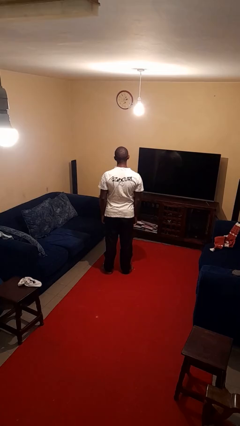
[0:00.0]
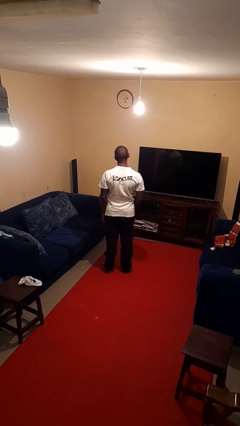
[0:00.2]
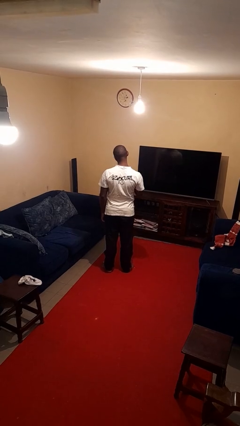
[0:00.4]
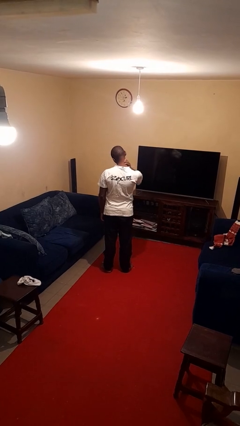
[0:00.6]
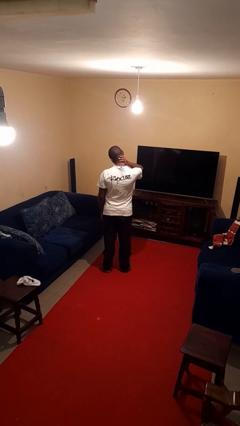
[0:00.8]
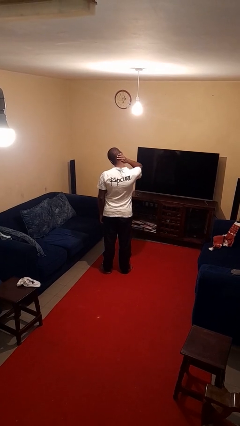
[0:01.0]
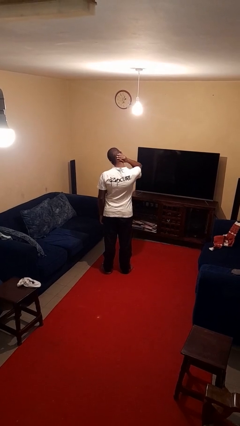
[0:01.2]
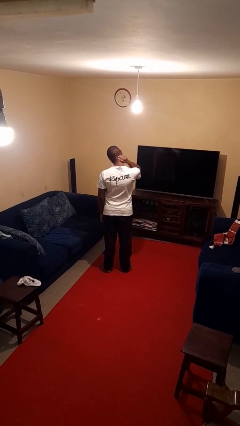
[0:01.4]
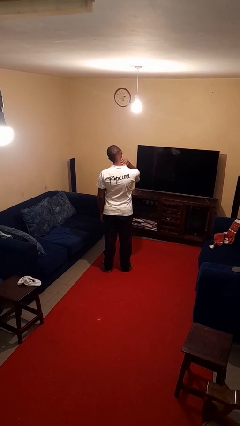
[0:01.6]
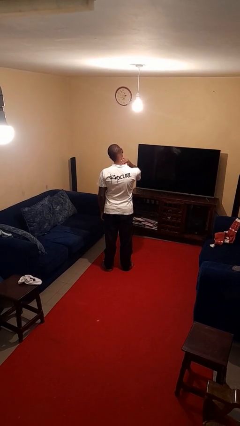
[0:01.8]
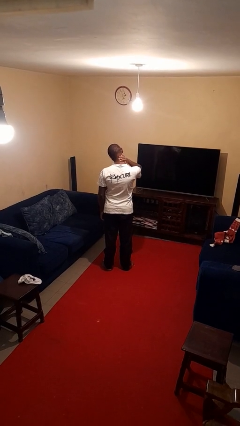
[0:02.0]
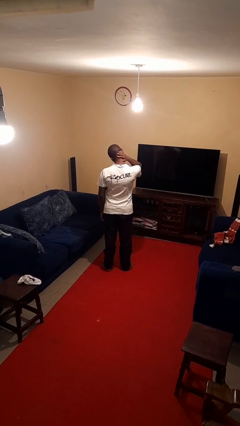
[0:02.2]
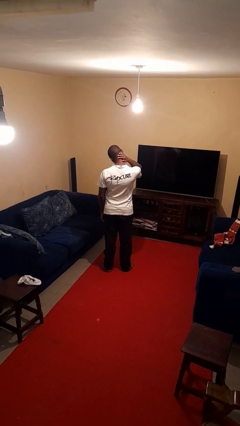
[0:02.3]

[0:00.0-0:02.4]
person rubs neck

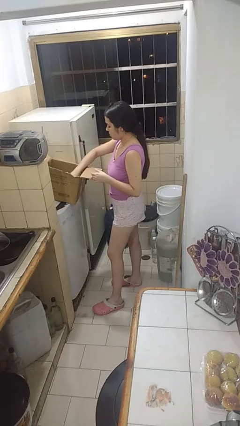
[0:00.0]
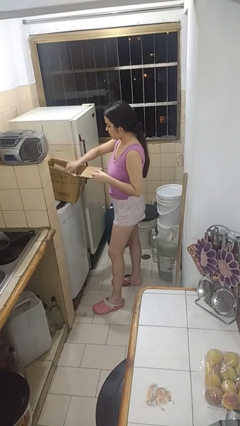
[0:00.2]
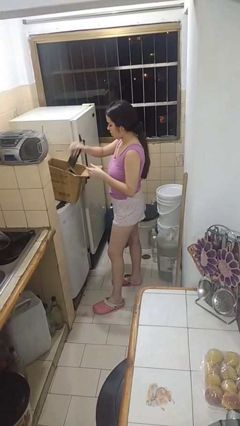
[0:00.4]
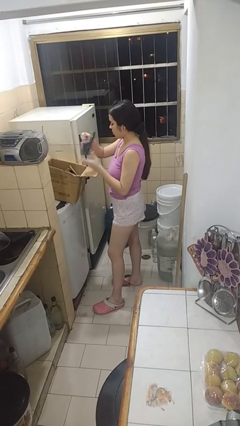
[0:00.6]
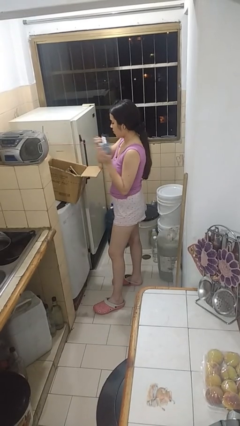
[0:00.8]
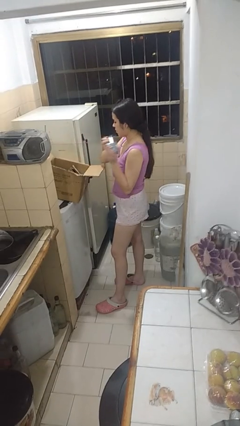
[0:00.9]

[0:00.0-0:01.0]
person takes object from box

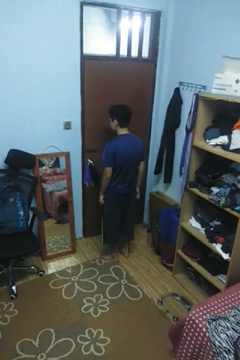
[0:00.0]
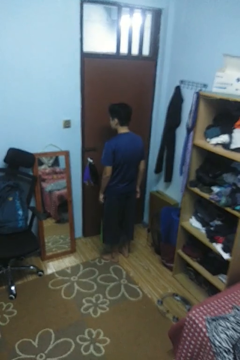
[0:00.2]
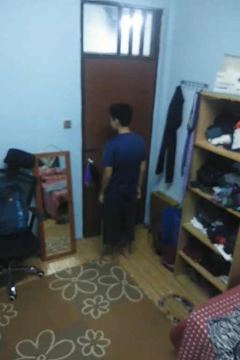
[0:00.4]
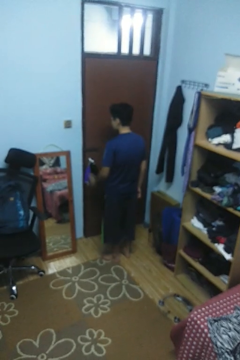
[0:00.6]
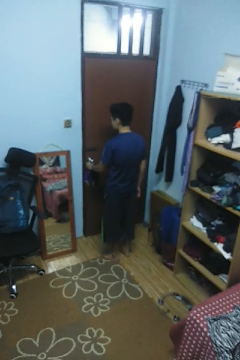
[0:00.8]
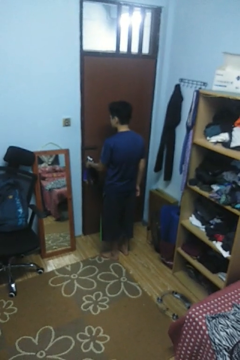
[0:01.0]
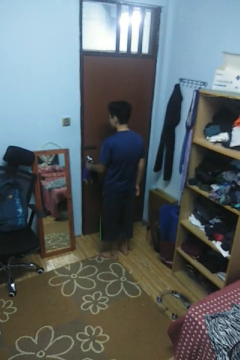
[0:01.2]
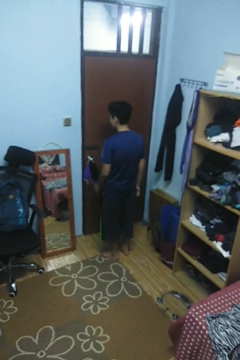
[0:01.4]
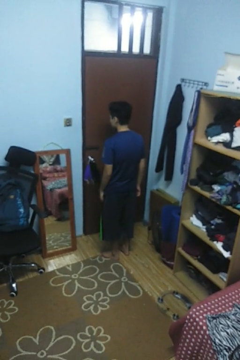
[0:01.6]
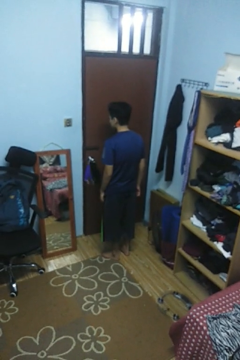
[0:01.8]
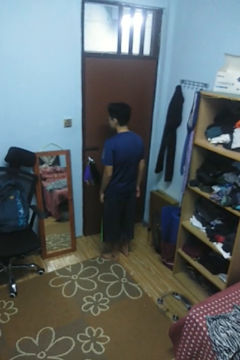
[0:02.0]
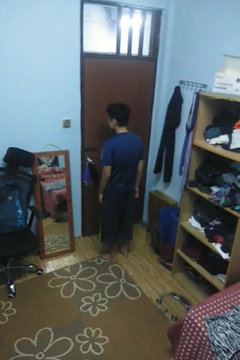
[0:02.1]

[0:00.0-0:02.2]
person unlocks door with keys

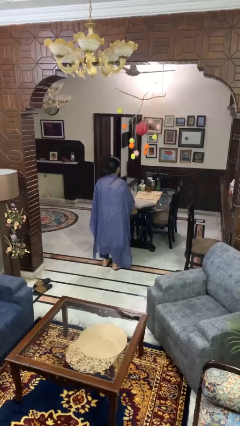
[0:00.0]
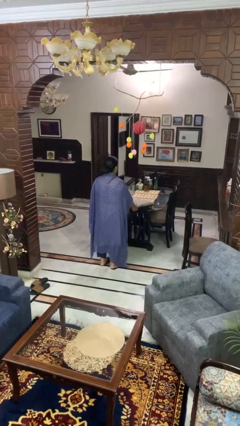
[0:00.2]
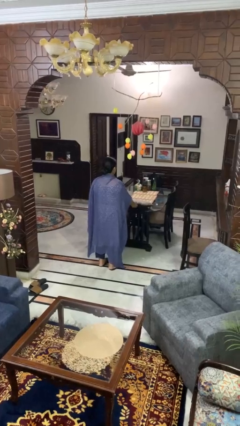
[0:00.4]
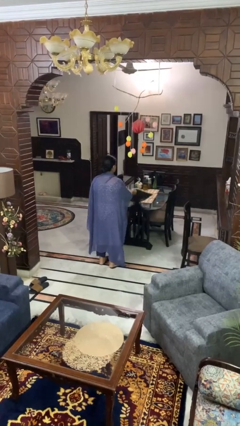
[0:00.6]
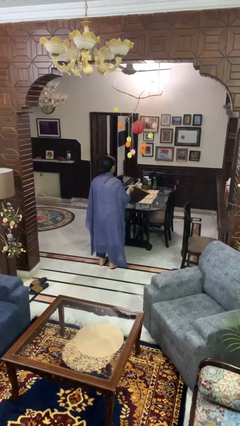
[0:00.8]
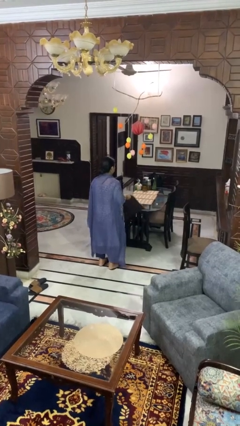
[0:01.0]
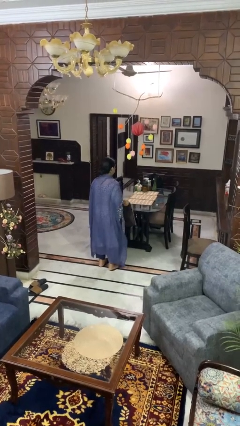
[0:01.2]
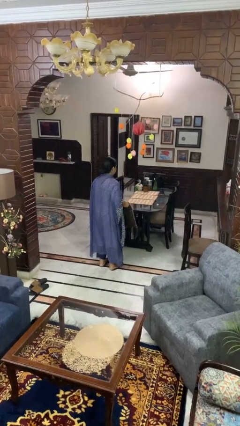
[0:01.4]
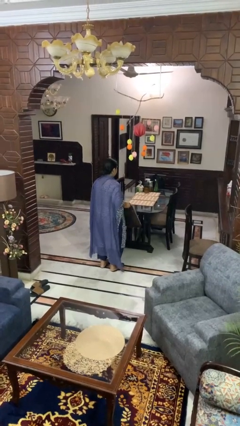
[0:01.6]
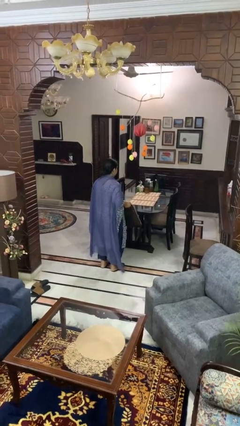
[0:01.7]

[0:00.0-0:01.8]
person picks up object from table

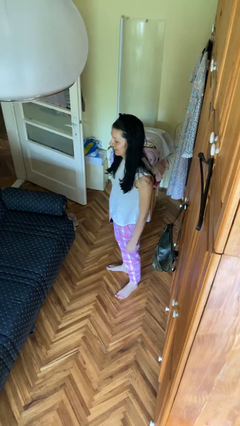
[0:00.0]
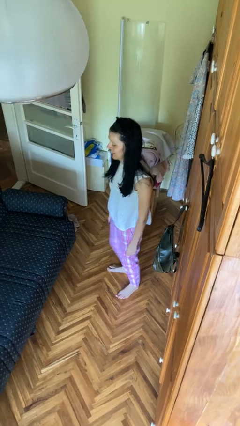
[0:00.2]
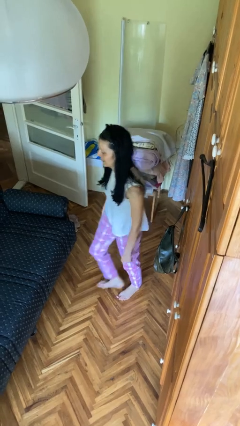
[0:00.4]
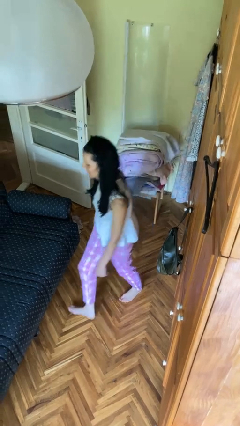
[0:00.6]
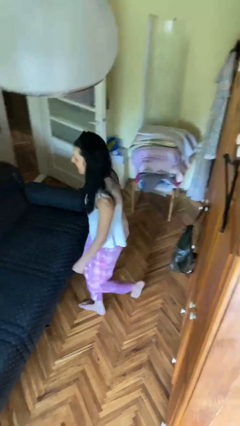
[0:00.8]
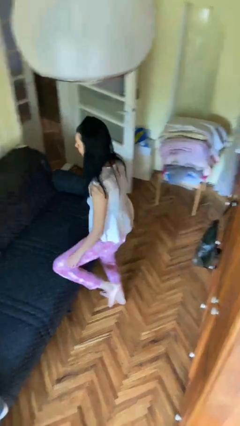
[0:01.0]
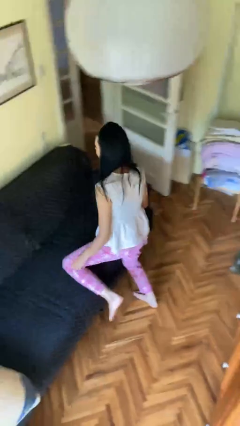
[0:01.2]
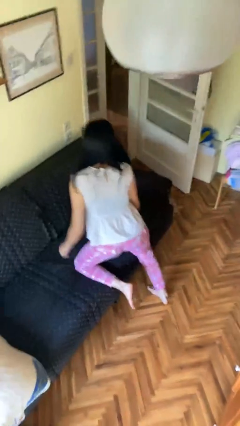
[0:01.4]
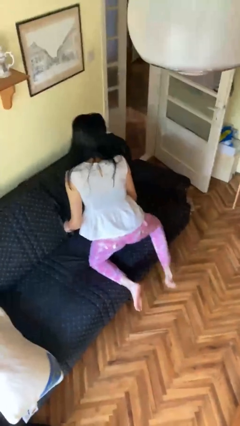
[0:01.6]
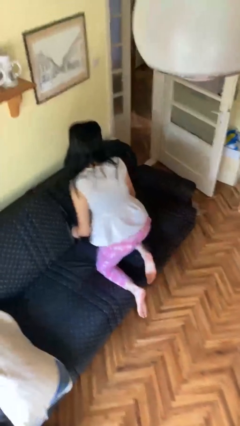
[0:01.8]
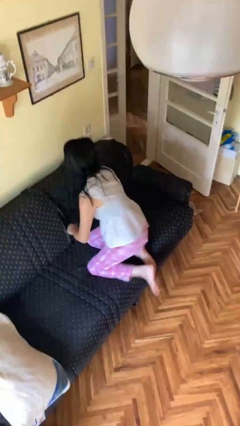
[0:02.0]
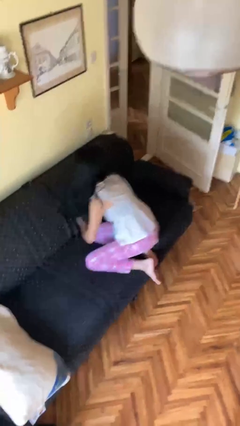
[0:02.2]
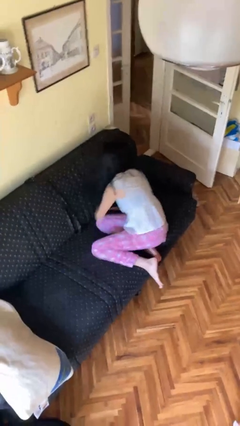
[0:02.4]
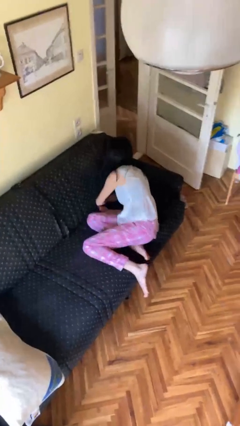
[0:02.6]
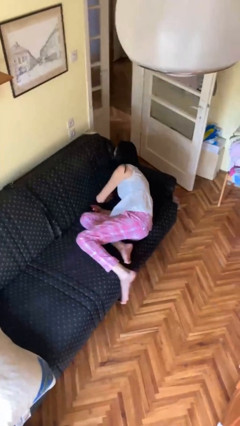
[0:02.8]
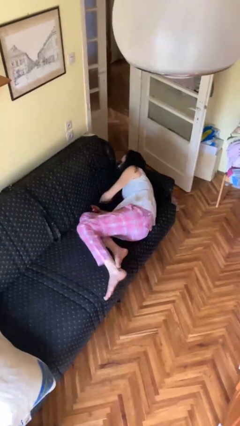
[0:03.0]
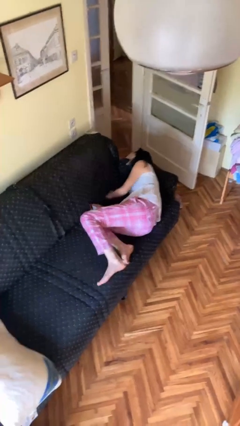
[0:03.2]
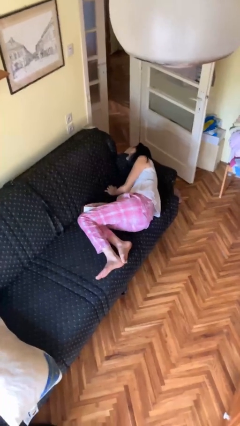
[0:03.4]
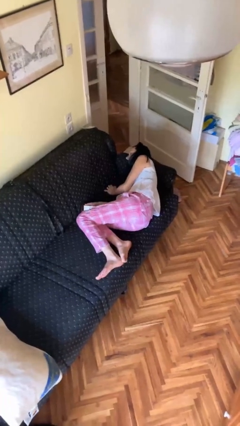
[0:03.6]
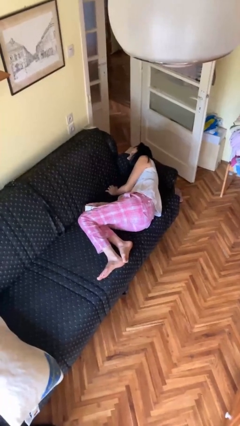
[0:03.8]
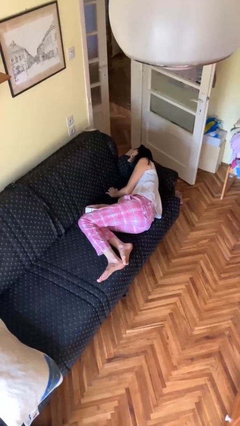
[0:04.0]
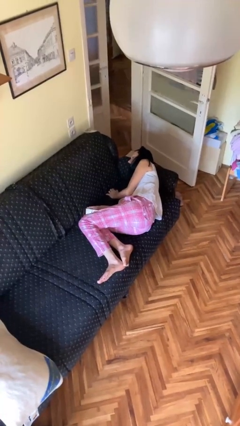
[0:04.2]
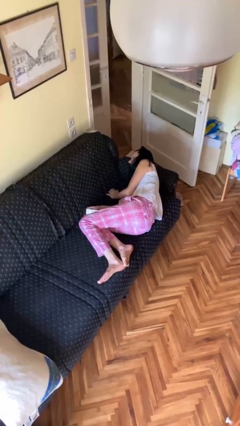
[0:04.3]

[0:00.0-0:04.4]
person lies down on couch

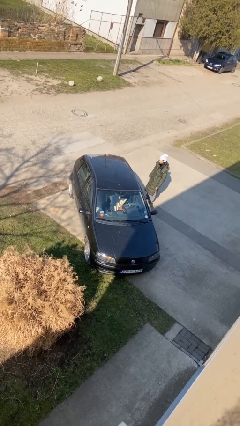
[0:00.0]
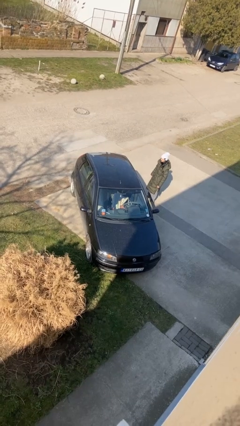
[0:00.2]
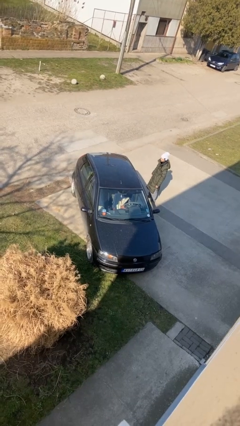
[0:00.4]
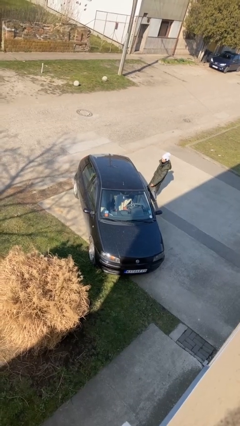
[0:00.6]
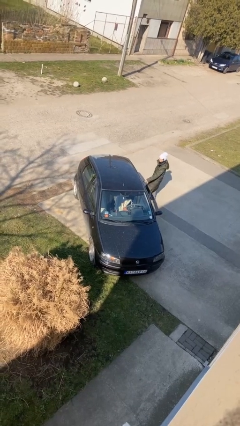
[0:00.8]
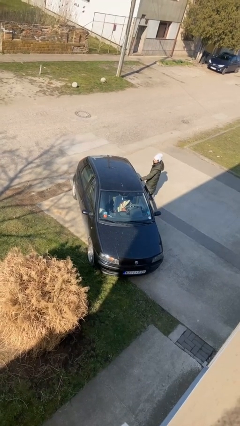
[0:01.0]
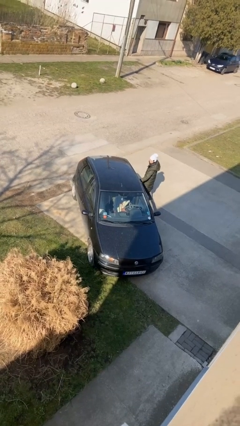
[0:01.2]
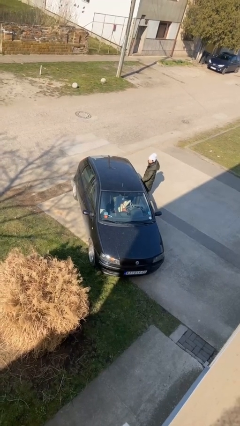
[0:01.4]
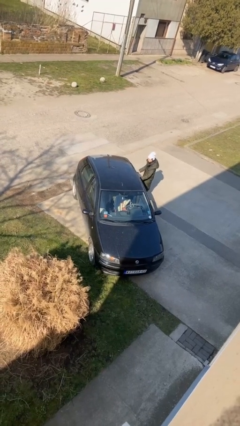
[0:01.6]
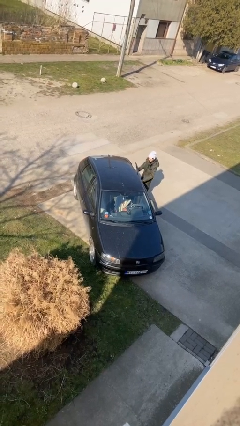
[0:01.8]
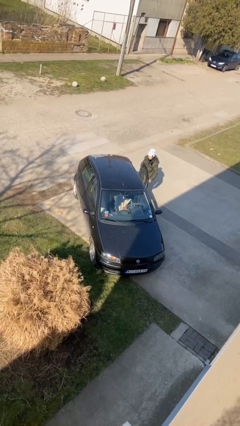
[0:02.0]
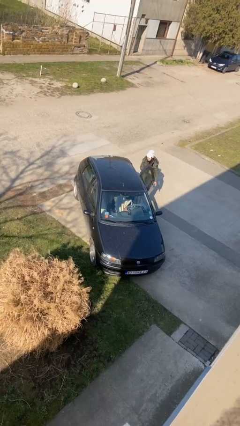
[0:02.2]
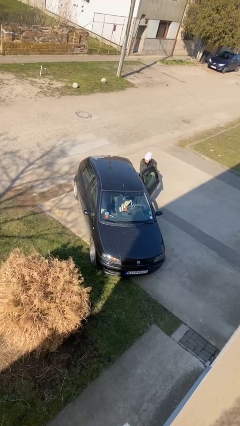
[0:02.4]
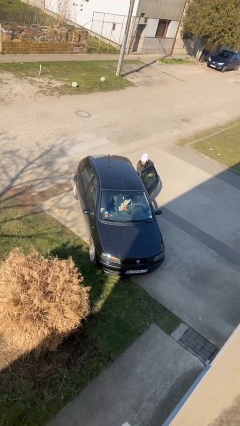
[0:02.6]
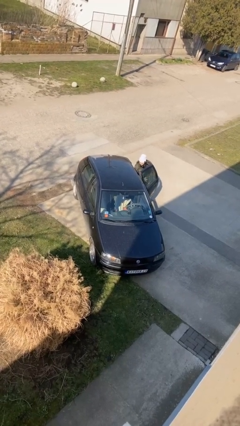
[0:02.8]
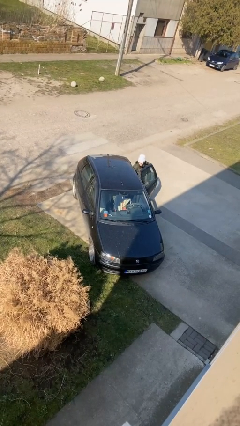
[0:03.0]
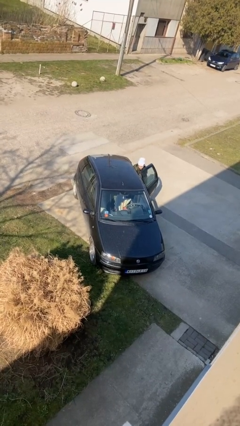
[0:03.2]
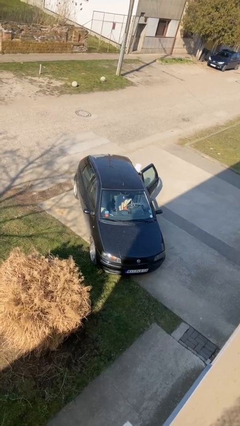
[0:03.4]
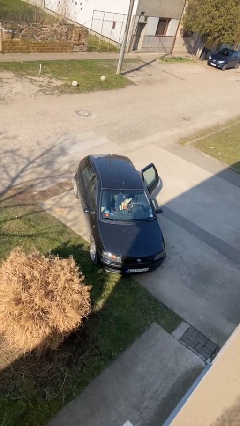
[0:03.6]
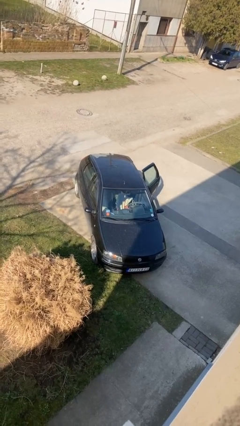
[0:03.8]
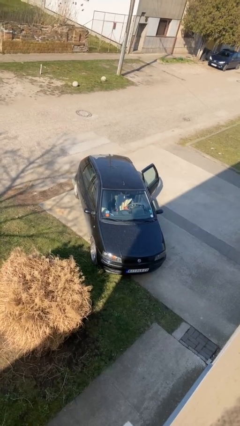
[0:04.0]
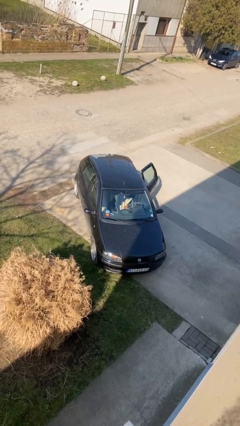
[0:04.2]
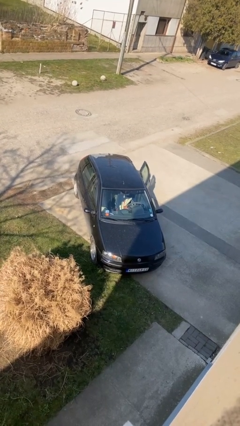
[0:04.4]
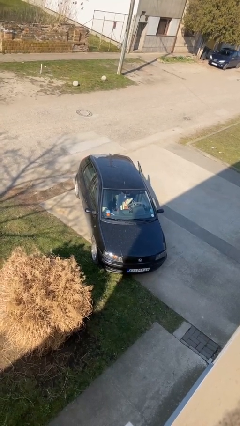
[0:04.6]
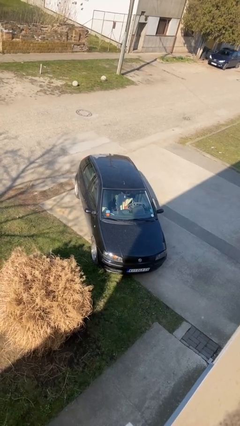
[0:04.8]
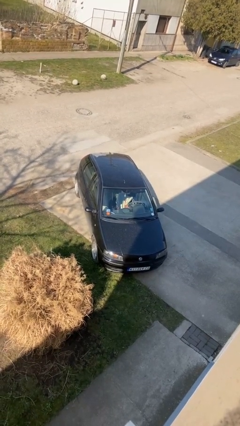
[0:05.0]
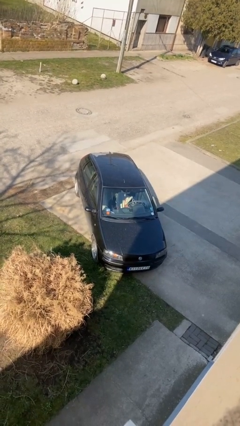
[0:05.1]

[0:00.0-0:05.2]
car picks up person

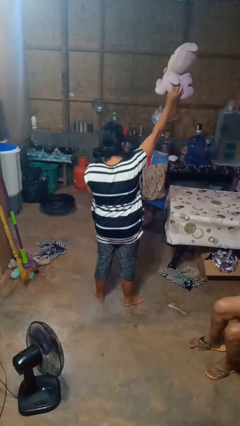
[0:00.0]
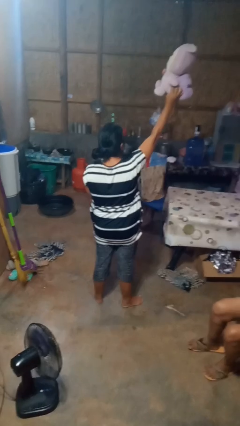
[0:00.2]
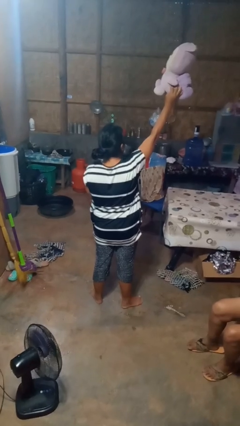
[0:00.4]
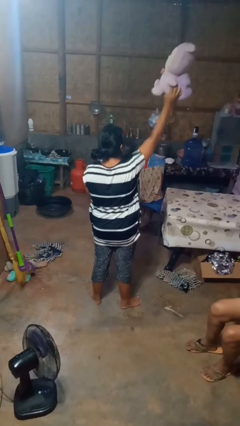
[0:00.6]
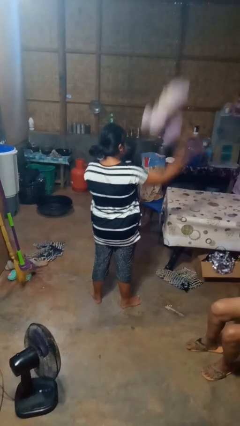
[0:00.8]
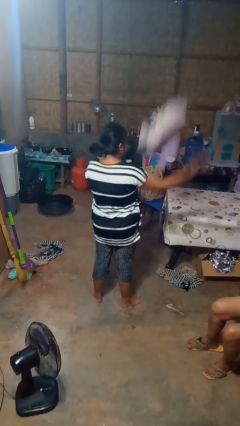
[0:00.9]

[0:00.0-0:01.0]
person drops object
